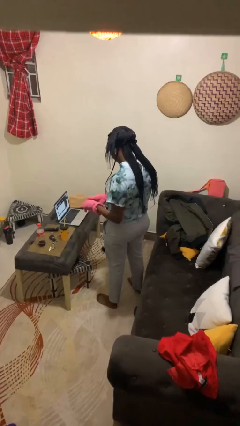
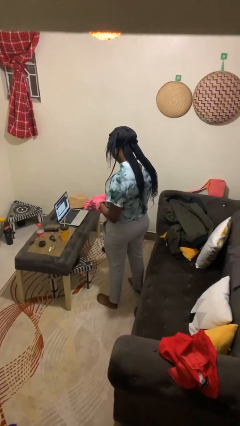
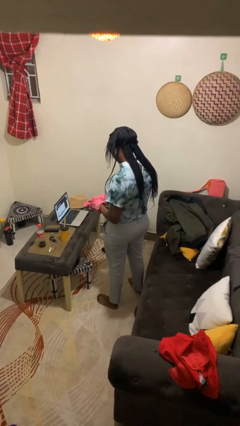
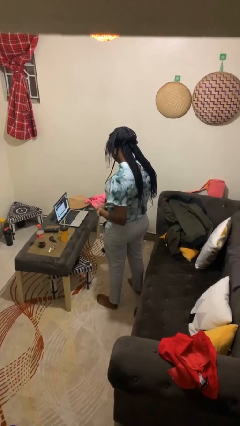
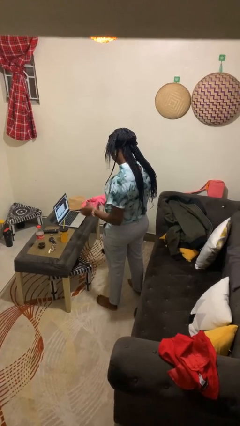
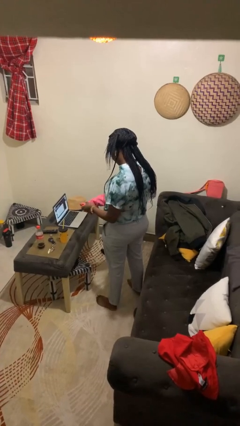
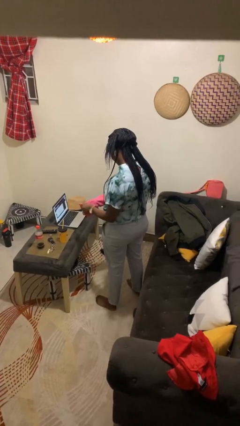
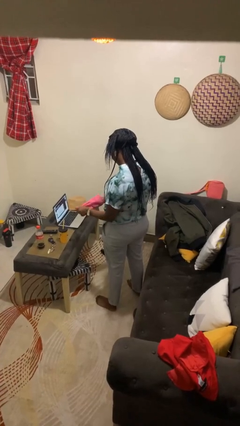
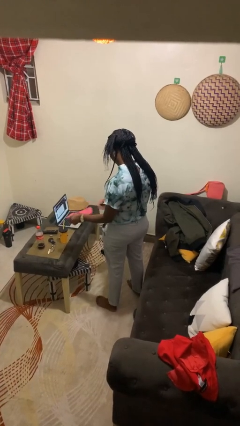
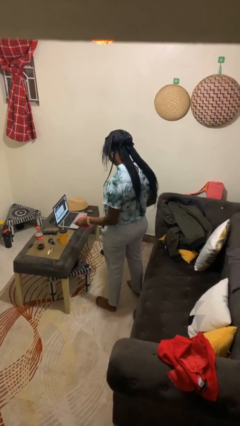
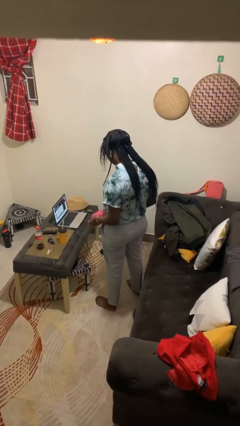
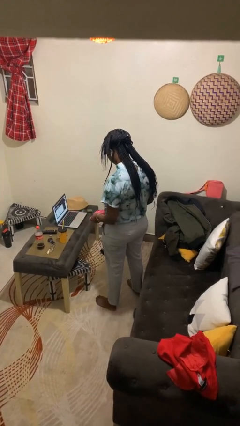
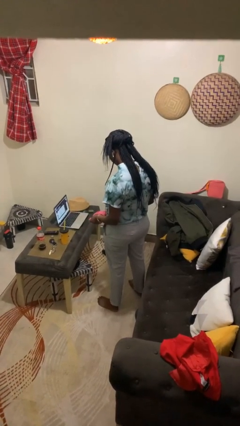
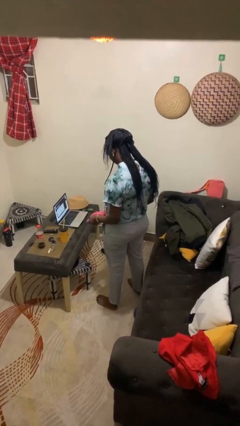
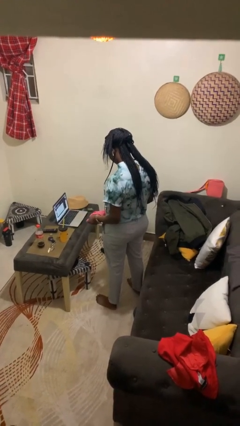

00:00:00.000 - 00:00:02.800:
person takes off gloves

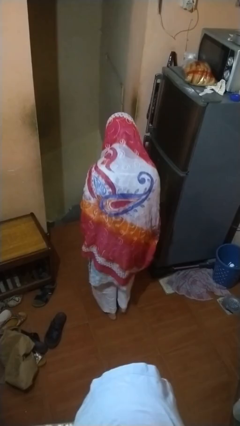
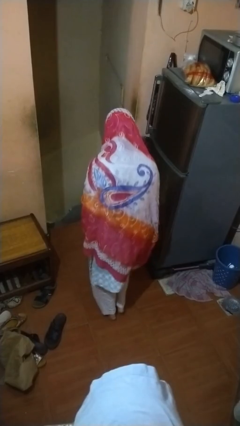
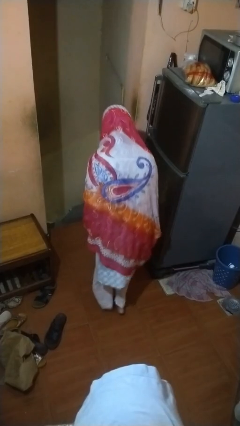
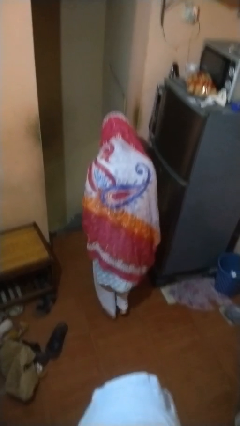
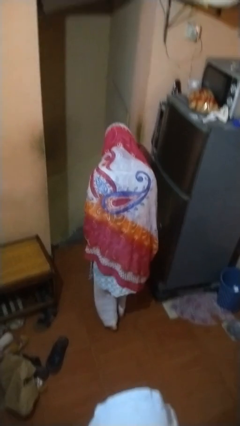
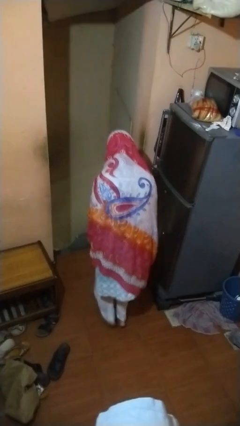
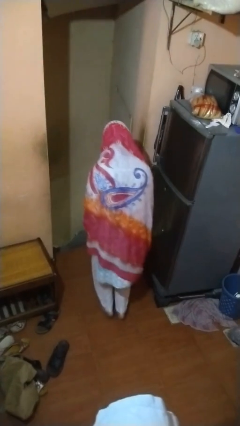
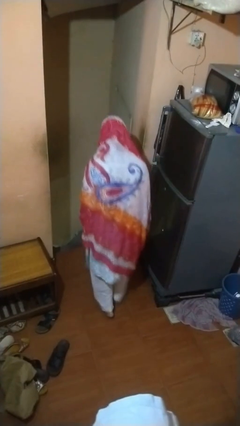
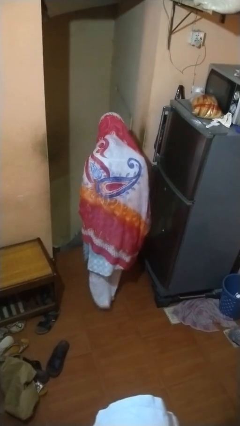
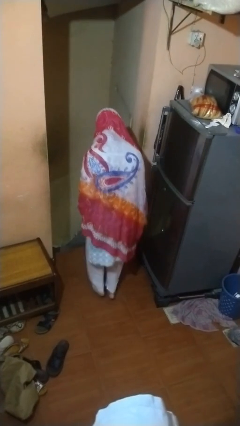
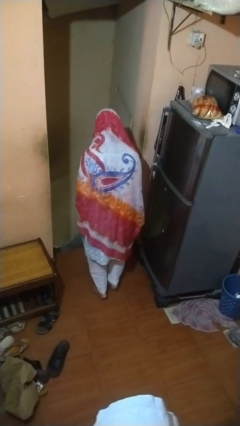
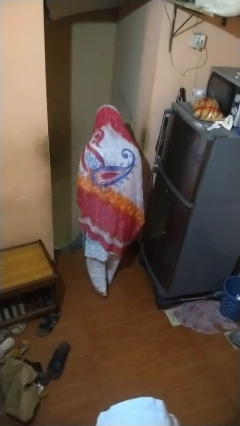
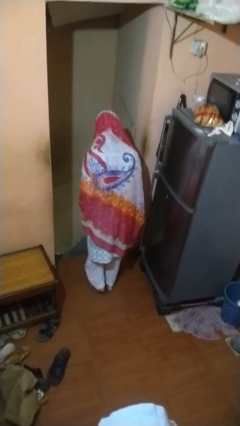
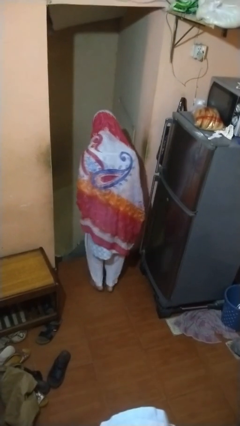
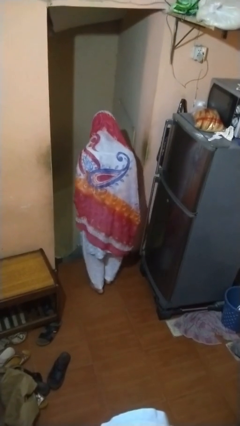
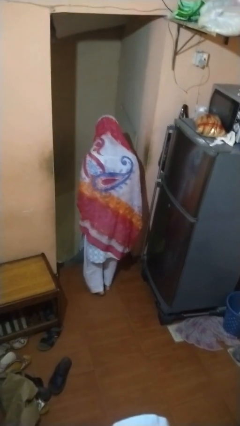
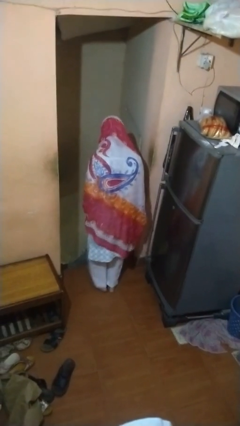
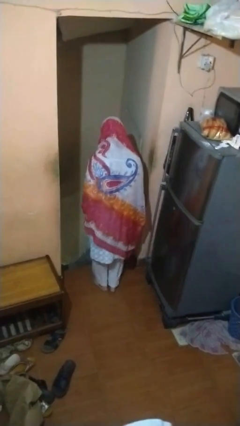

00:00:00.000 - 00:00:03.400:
person walks tiptoe

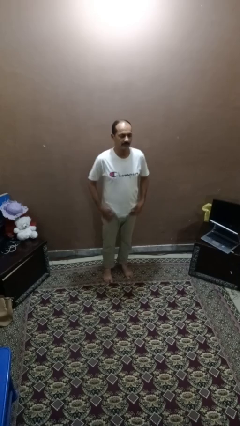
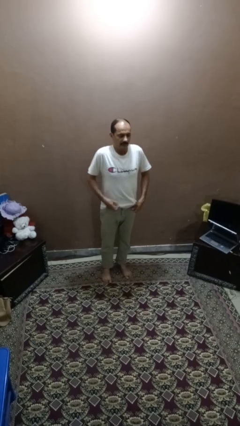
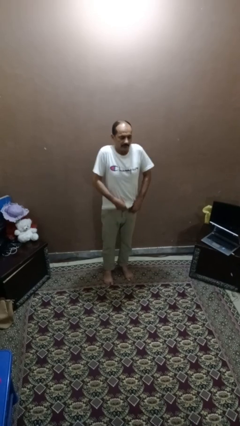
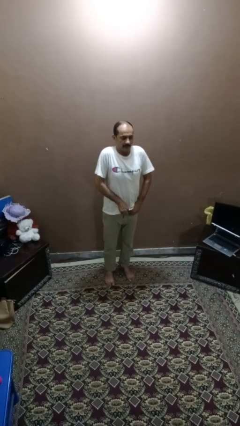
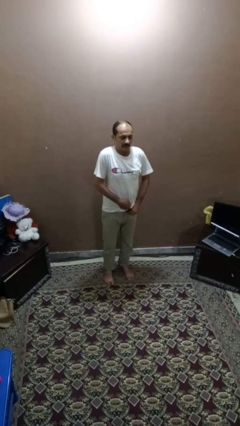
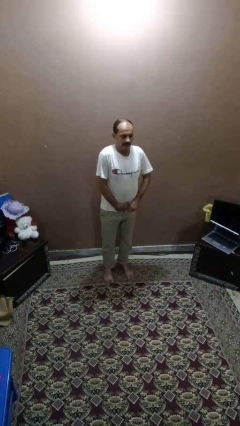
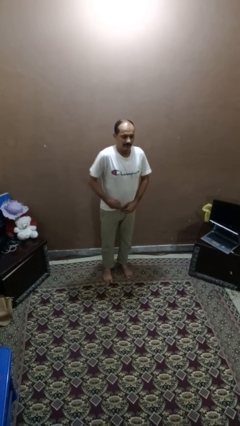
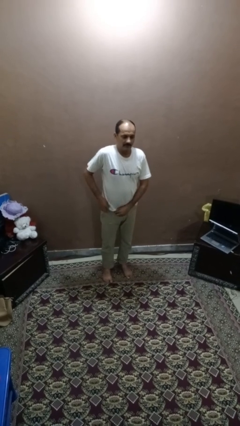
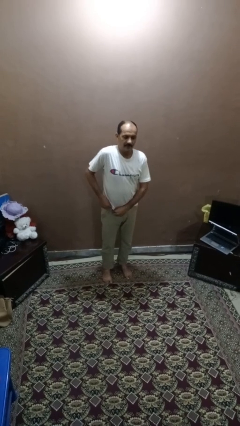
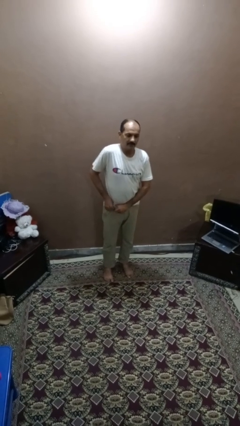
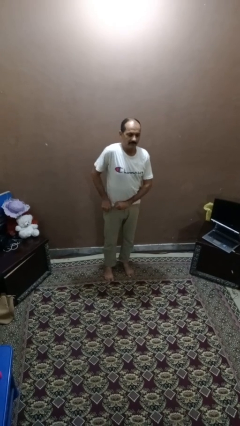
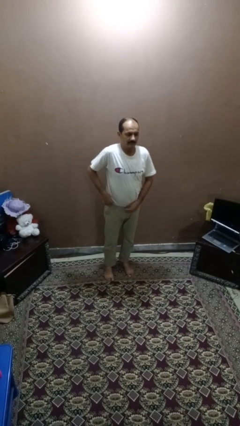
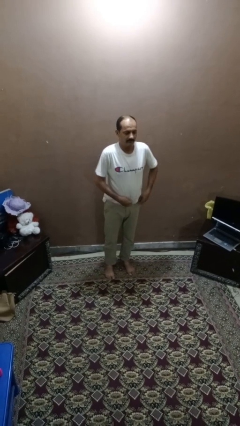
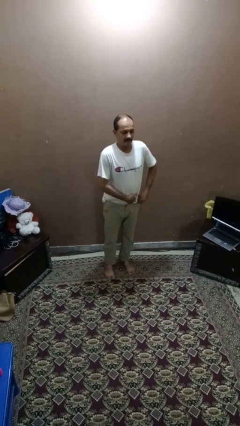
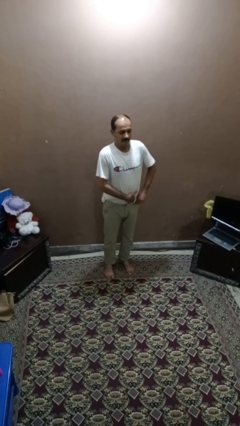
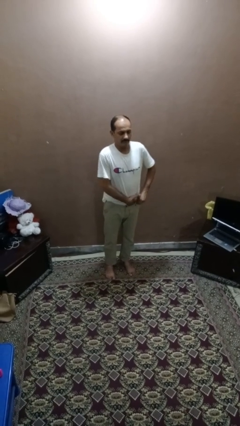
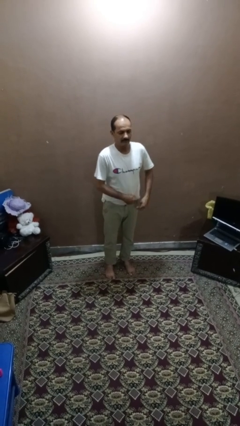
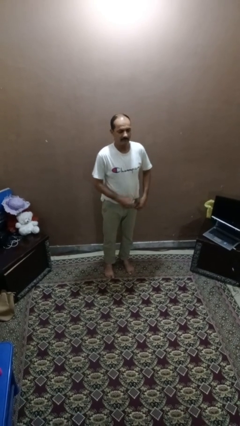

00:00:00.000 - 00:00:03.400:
person tucks in shirt

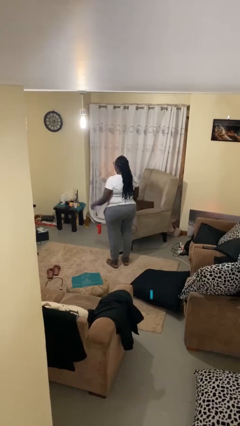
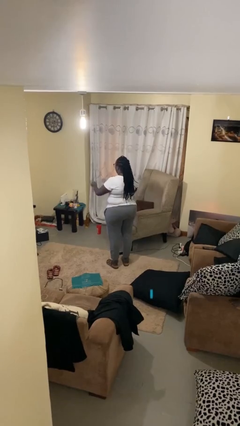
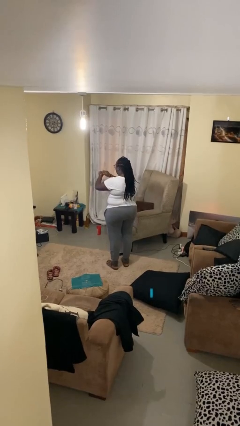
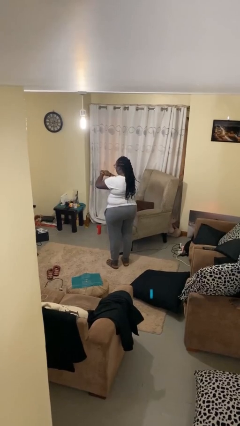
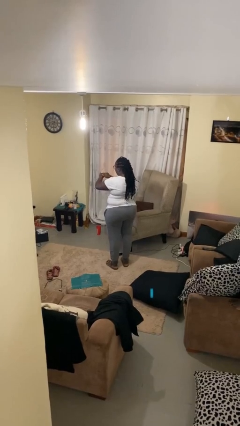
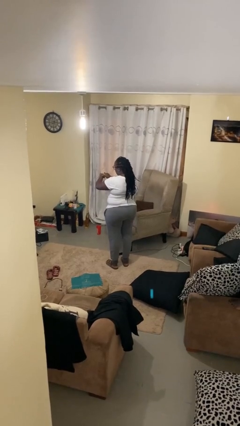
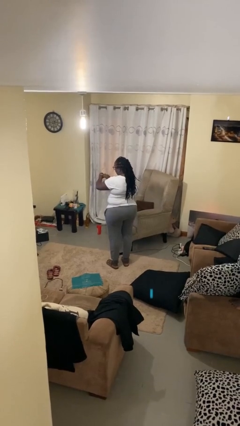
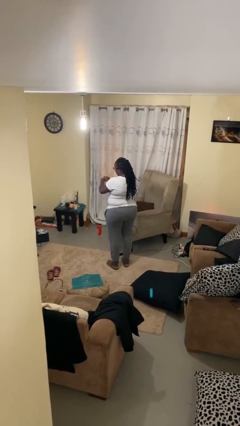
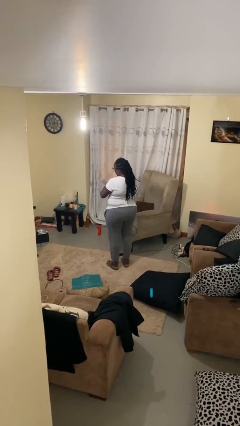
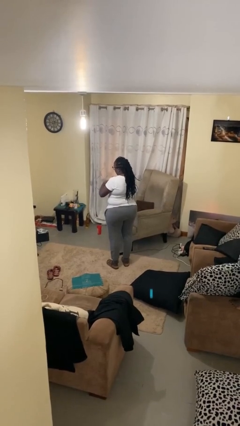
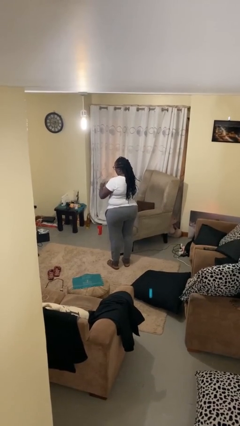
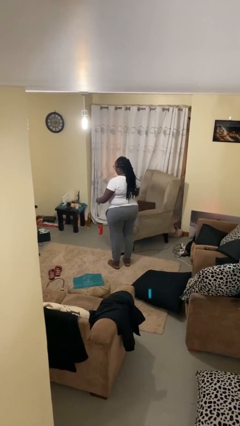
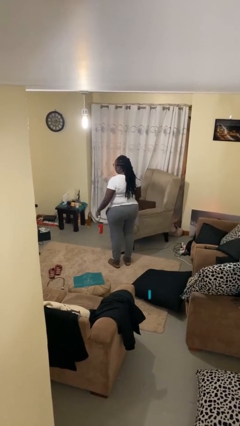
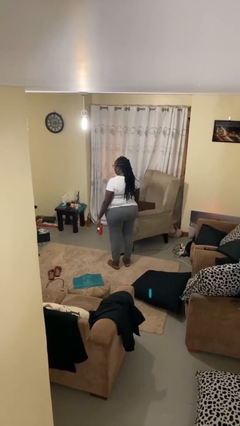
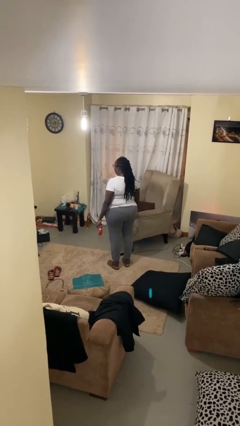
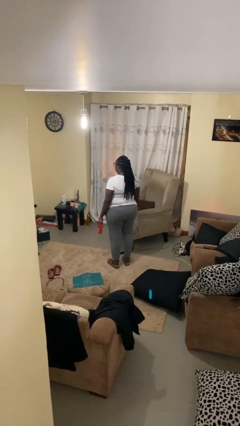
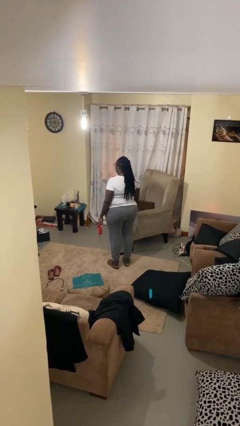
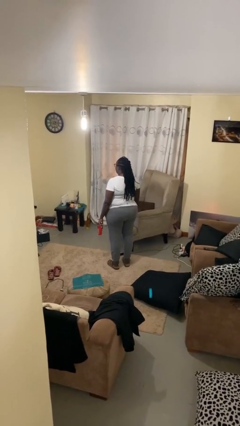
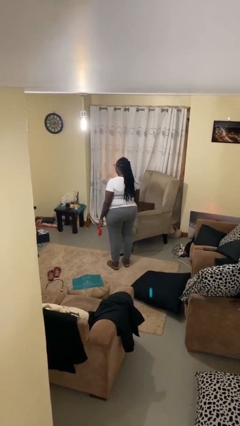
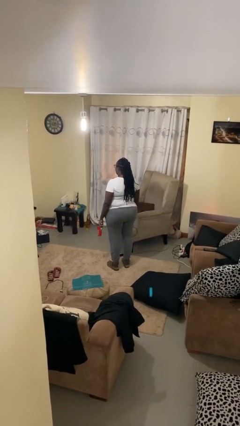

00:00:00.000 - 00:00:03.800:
person takes off wristwatch

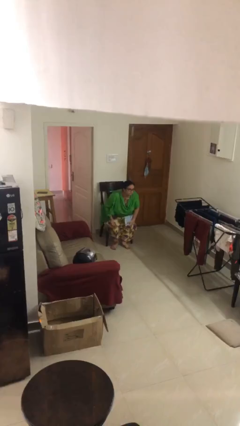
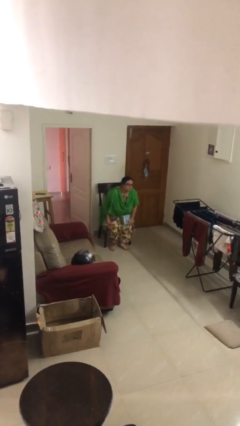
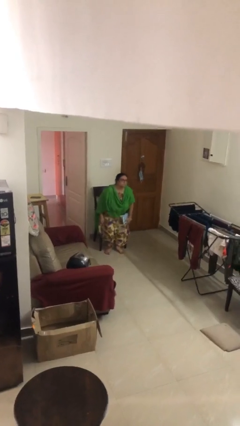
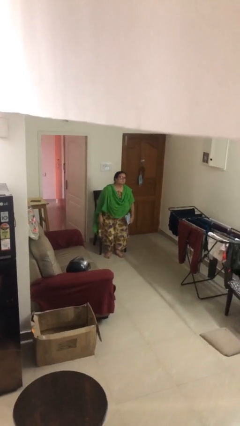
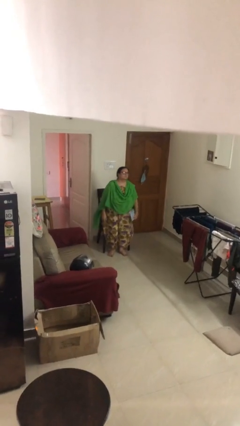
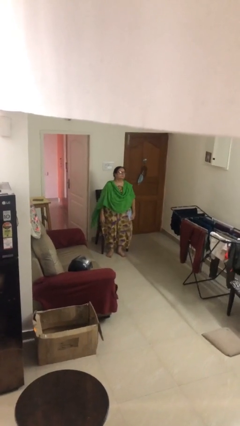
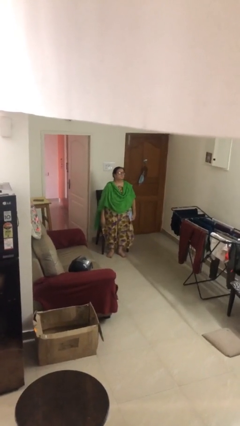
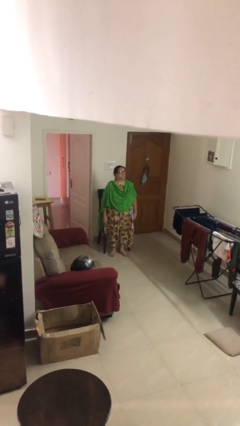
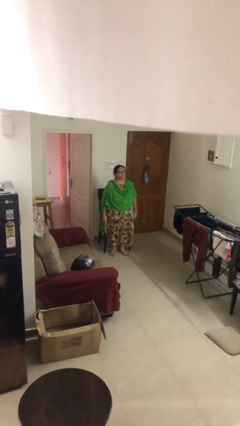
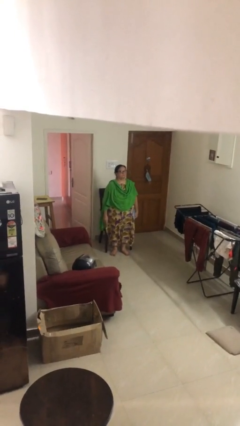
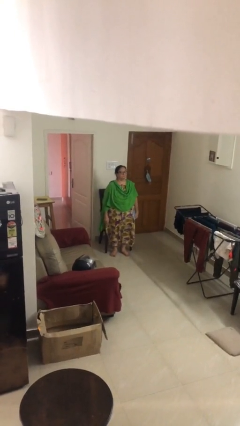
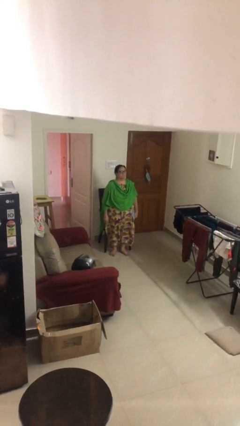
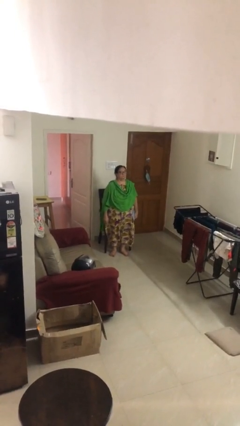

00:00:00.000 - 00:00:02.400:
person stands up

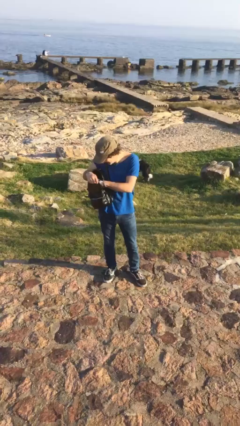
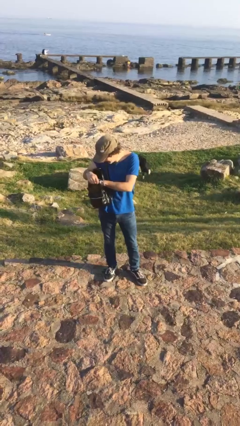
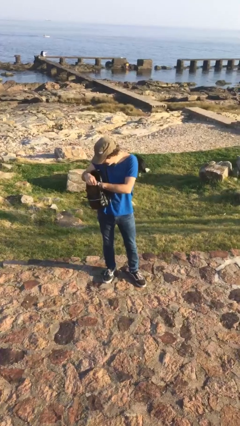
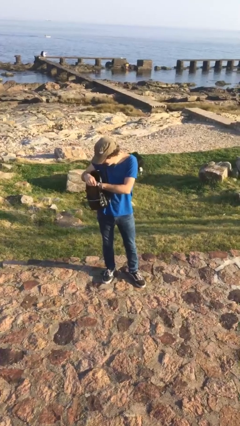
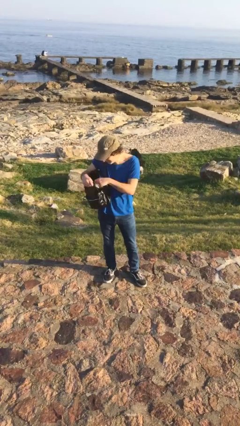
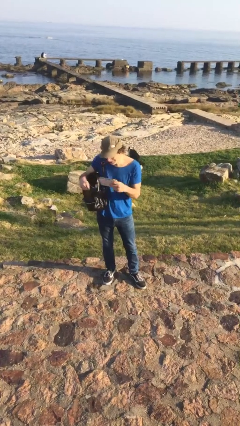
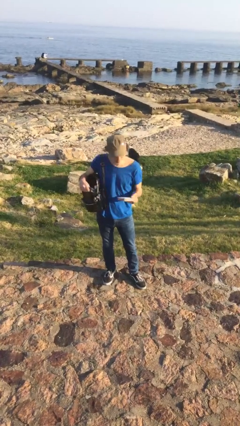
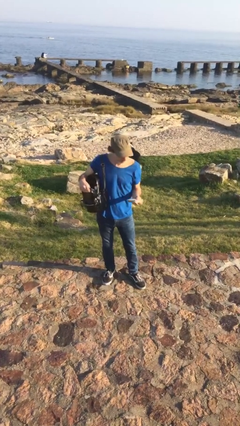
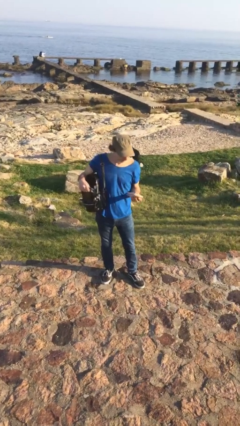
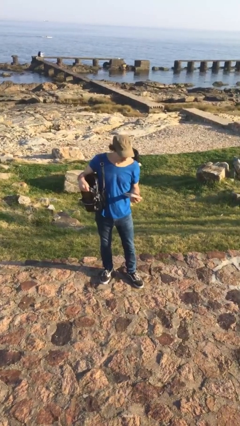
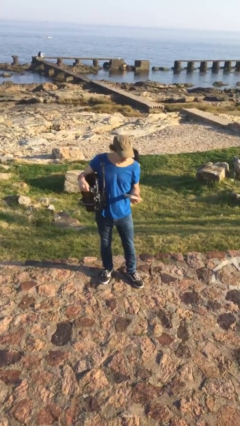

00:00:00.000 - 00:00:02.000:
person takes object from purse
